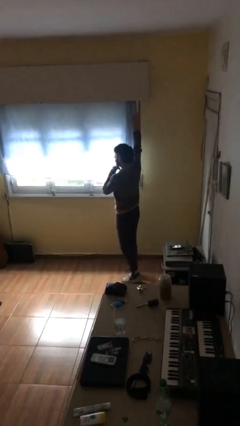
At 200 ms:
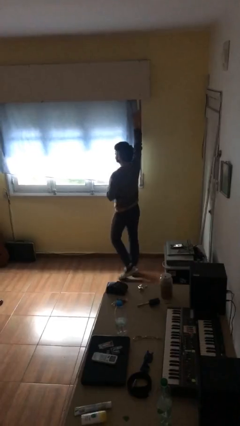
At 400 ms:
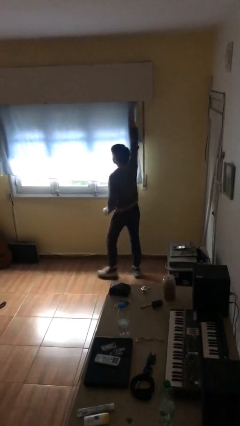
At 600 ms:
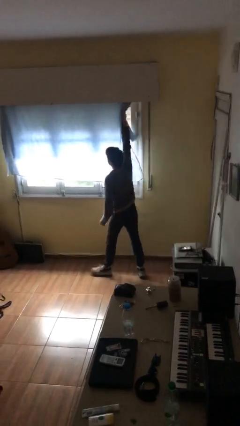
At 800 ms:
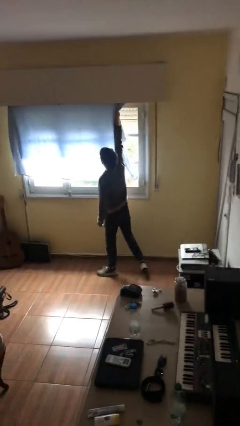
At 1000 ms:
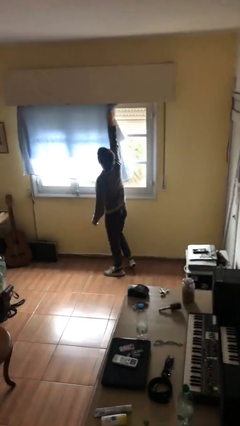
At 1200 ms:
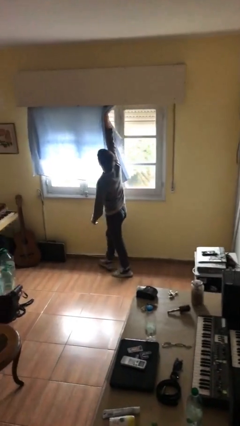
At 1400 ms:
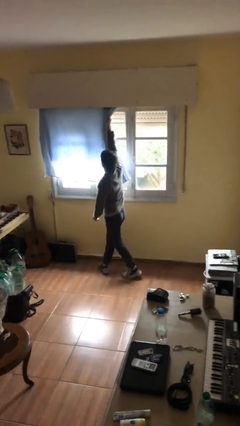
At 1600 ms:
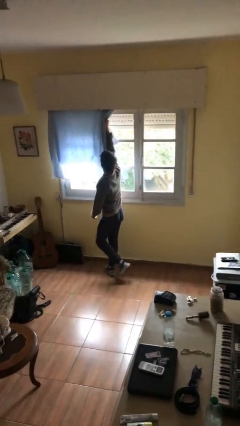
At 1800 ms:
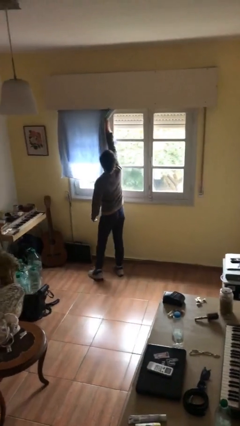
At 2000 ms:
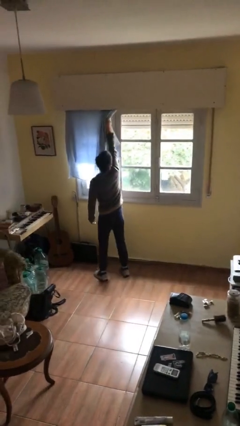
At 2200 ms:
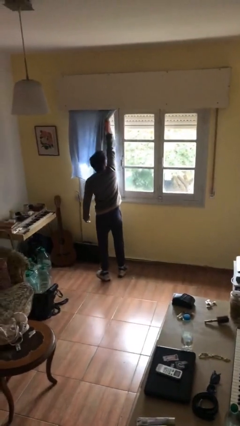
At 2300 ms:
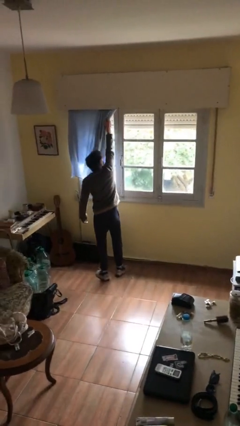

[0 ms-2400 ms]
person opens curtains

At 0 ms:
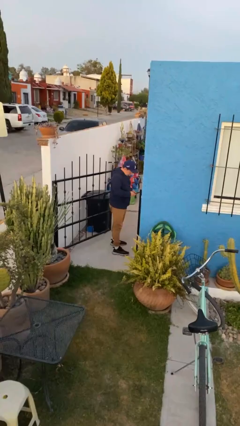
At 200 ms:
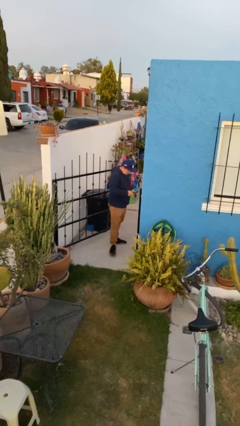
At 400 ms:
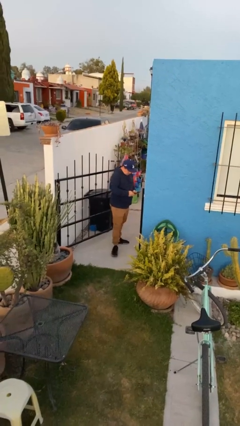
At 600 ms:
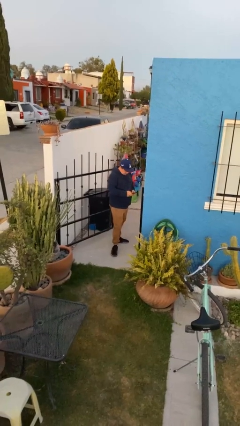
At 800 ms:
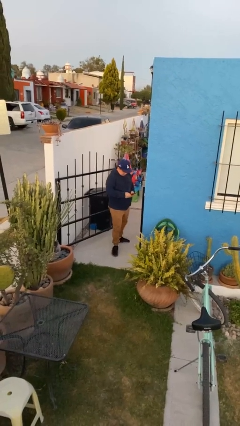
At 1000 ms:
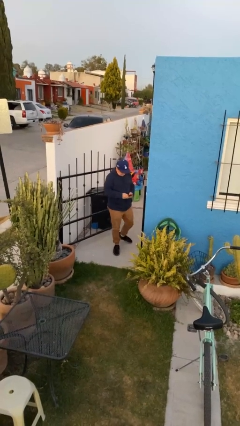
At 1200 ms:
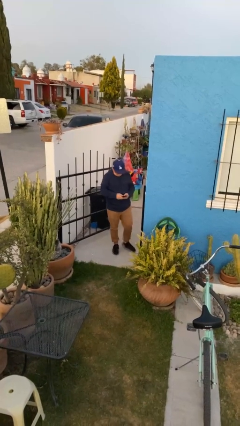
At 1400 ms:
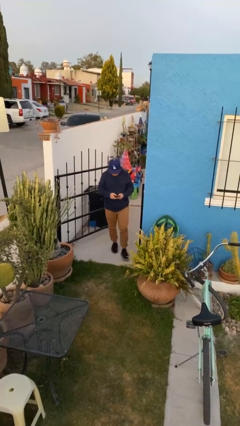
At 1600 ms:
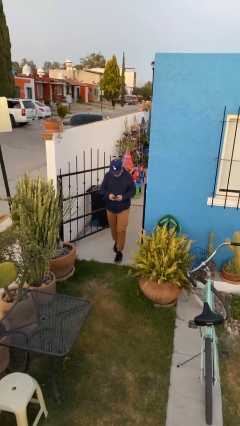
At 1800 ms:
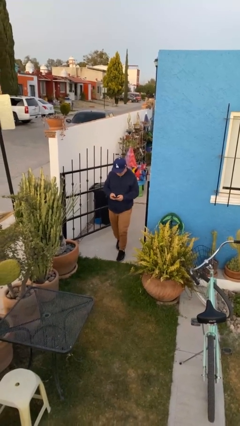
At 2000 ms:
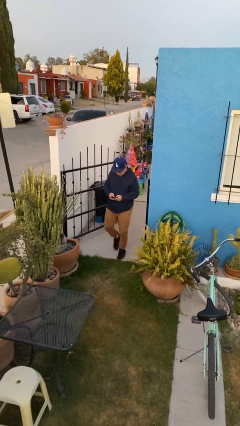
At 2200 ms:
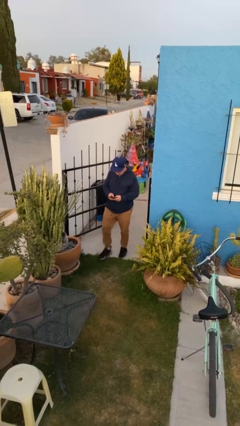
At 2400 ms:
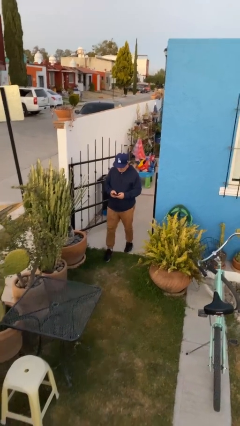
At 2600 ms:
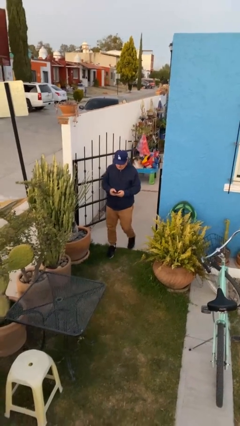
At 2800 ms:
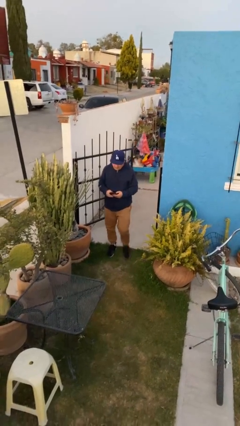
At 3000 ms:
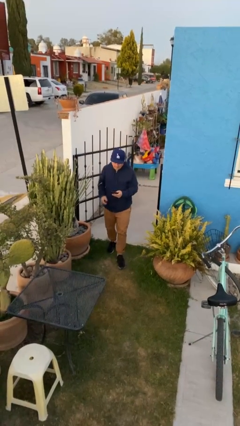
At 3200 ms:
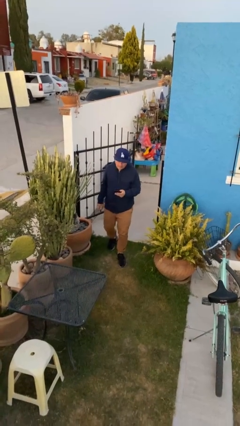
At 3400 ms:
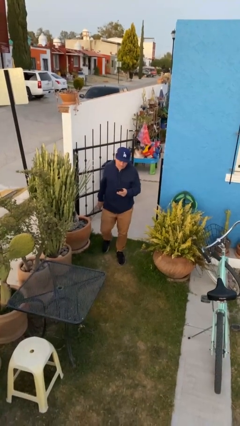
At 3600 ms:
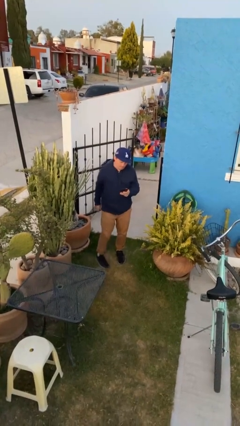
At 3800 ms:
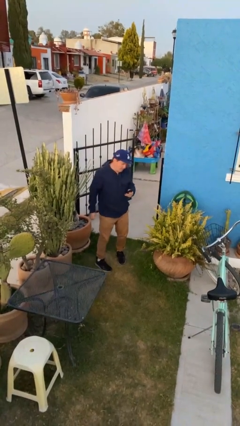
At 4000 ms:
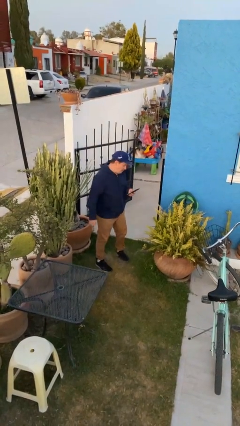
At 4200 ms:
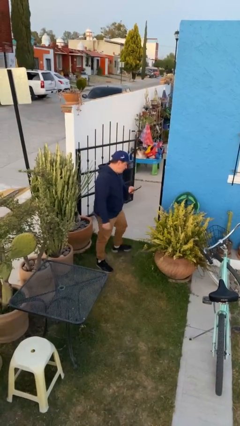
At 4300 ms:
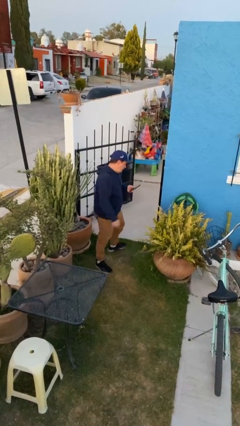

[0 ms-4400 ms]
person enters scene through structure

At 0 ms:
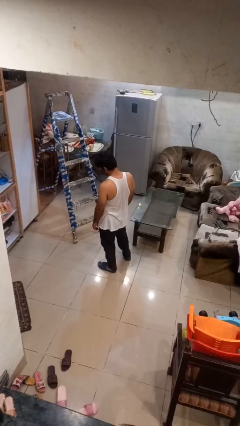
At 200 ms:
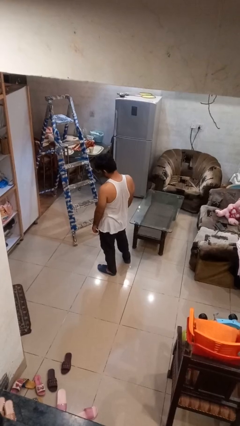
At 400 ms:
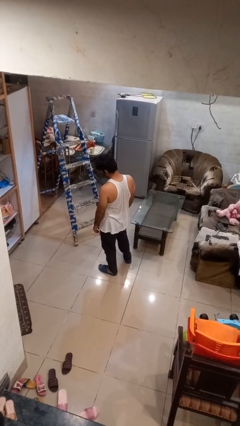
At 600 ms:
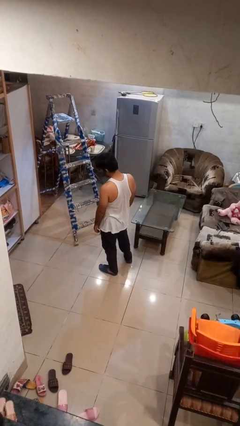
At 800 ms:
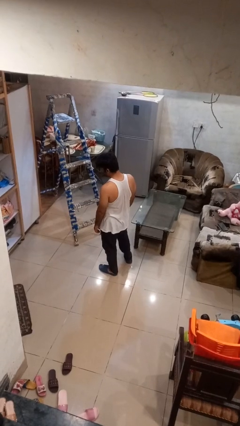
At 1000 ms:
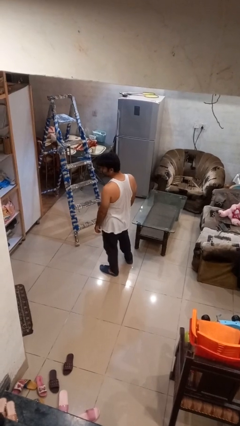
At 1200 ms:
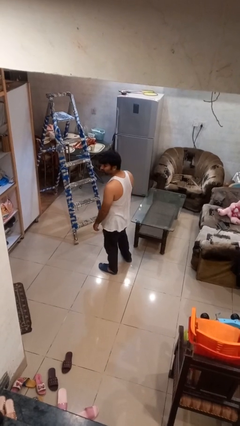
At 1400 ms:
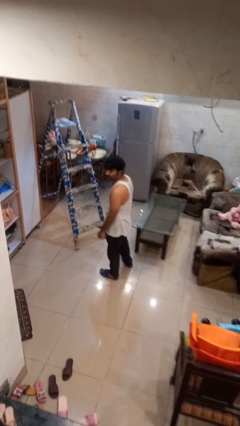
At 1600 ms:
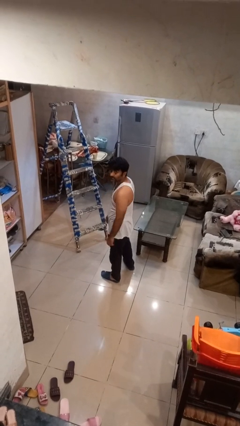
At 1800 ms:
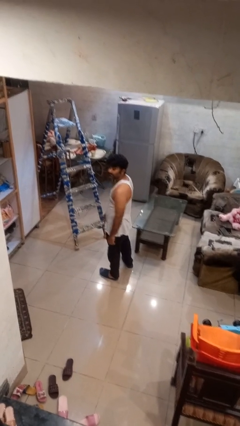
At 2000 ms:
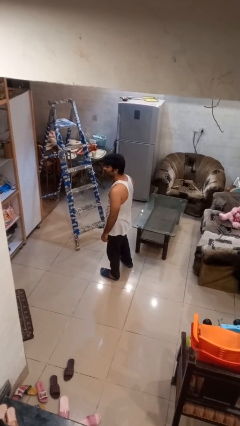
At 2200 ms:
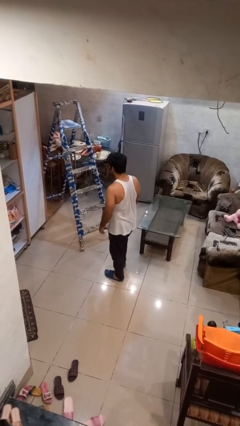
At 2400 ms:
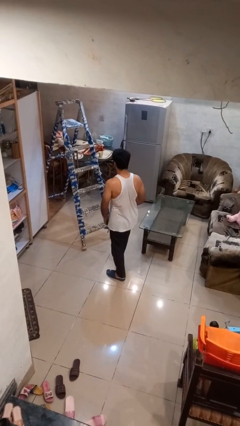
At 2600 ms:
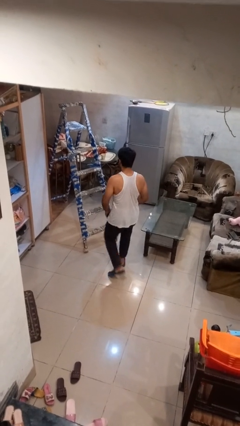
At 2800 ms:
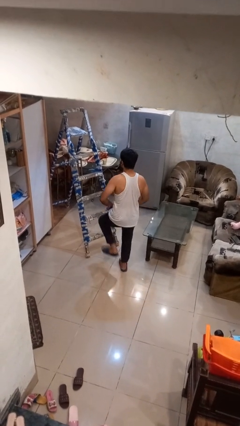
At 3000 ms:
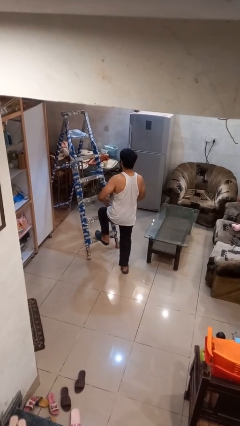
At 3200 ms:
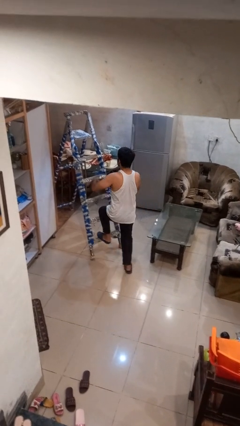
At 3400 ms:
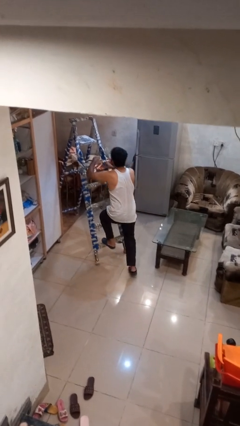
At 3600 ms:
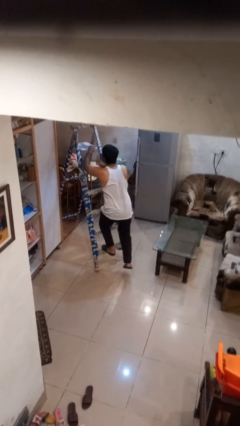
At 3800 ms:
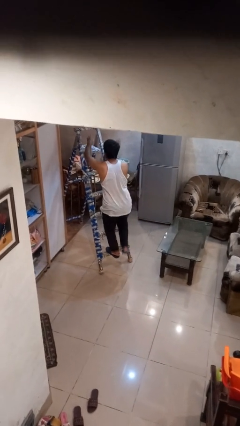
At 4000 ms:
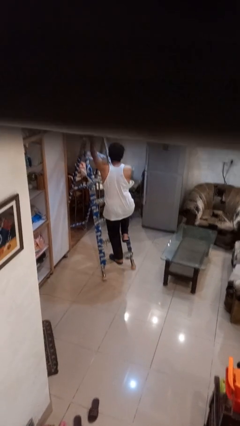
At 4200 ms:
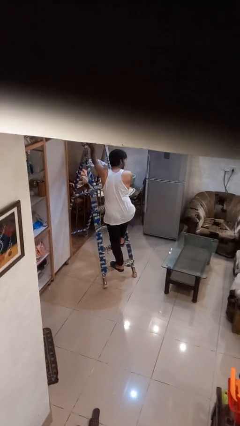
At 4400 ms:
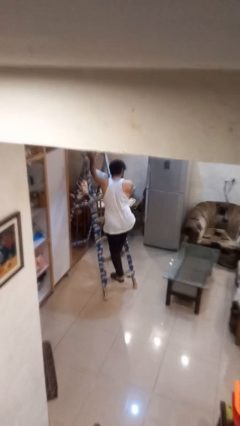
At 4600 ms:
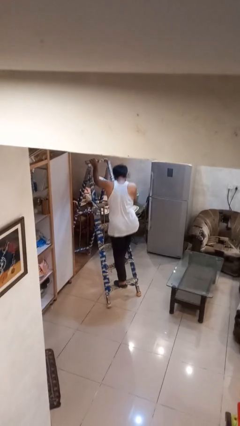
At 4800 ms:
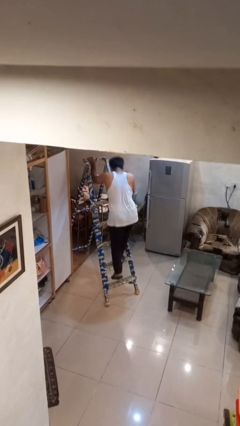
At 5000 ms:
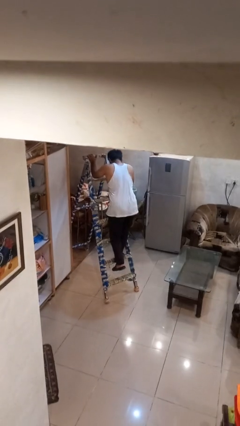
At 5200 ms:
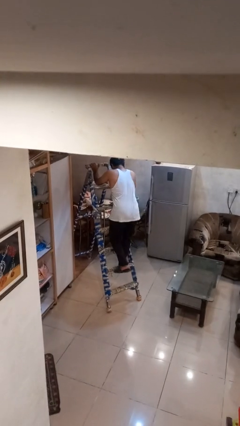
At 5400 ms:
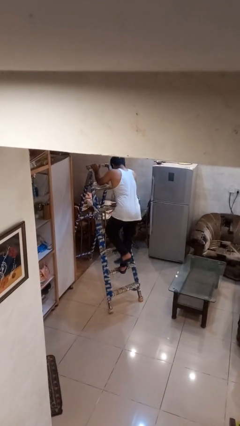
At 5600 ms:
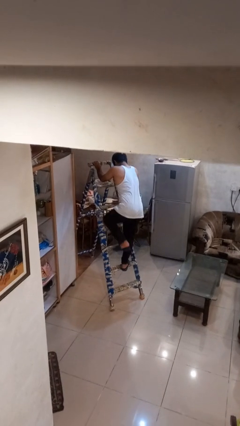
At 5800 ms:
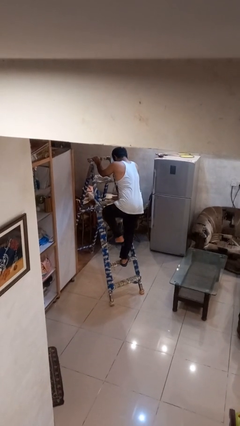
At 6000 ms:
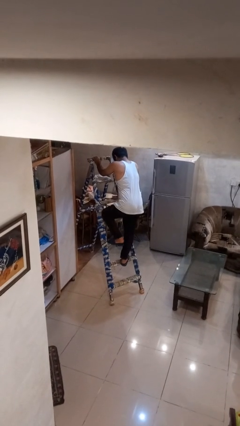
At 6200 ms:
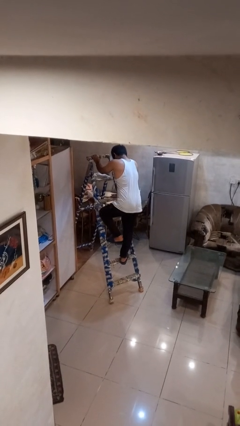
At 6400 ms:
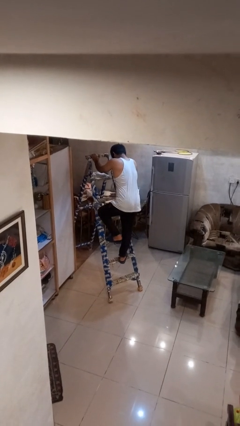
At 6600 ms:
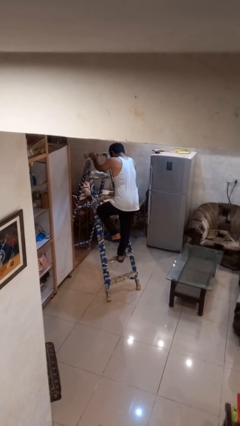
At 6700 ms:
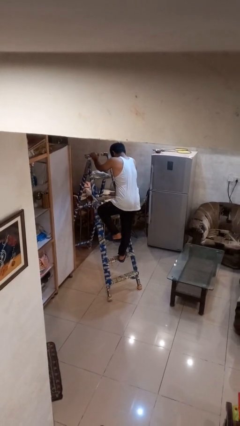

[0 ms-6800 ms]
person climbs up ladder

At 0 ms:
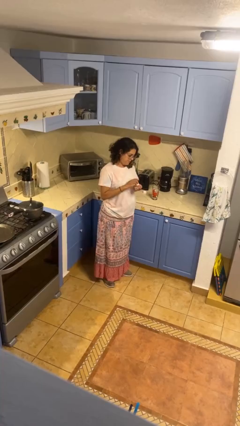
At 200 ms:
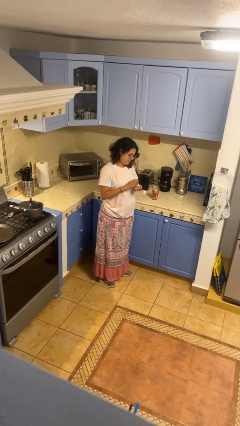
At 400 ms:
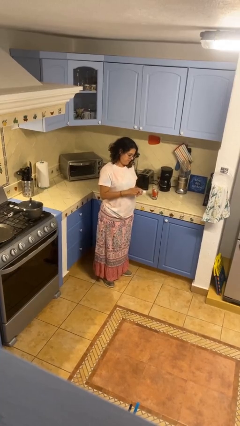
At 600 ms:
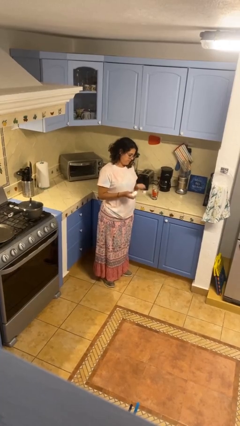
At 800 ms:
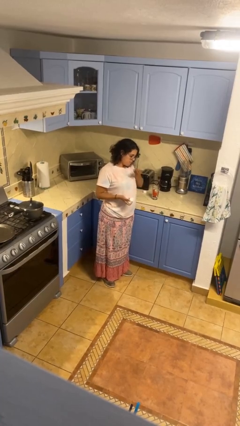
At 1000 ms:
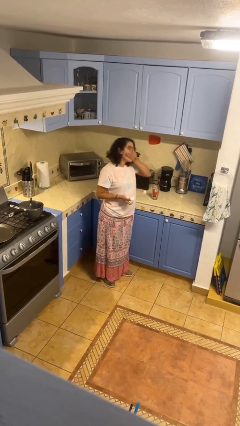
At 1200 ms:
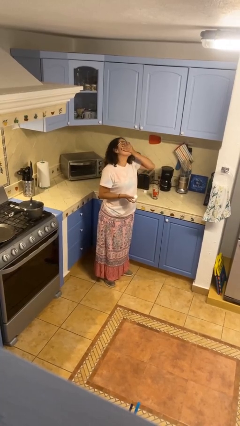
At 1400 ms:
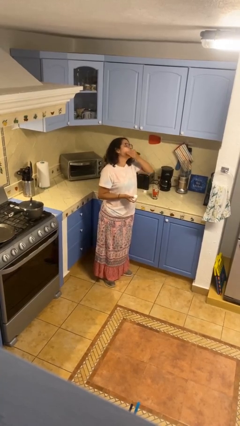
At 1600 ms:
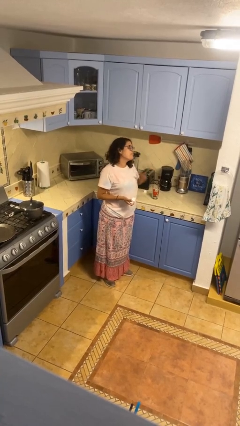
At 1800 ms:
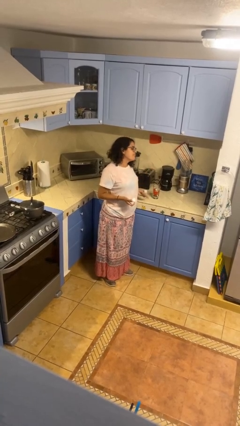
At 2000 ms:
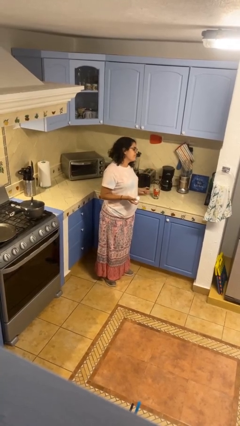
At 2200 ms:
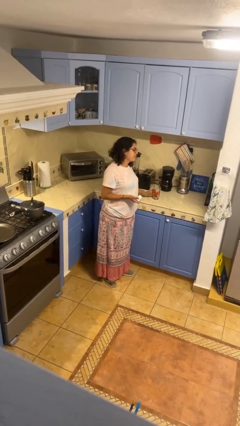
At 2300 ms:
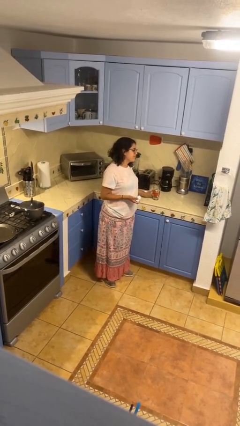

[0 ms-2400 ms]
person takes medicine pills

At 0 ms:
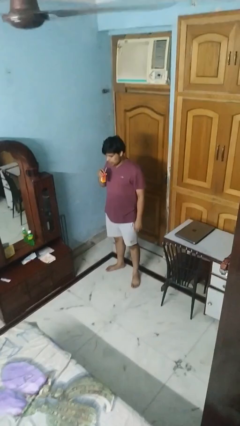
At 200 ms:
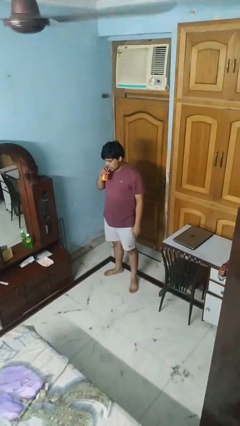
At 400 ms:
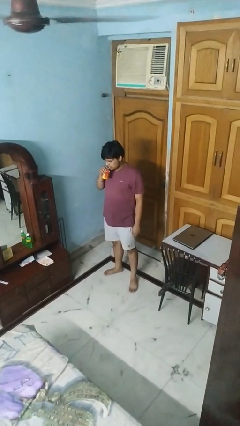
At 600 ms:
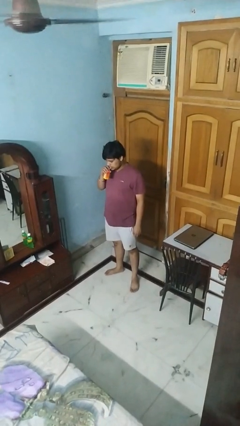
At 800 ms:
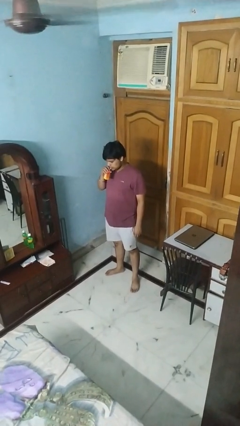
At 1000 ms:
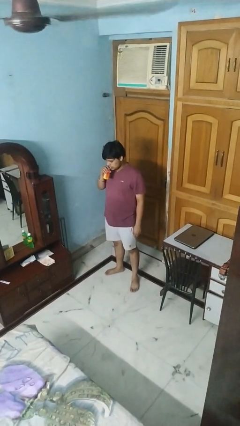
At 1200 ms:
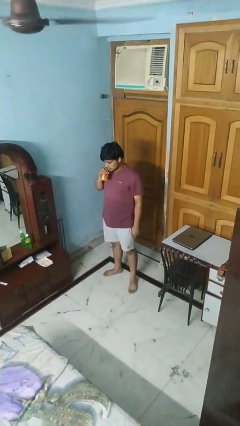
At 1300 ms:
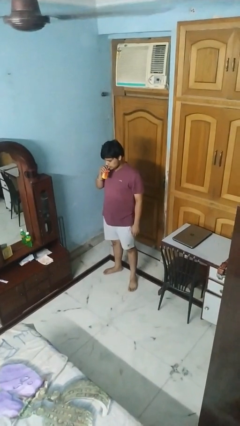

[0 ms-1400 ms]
person drinks from straw
